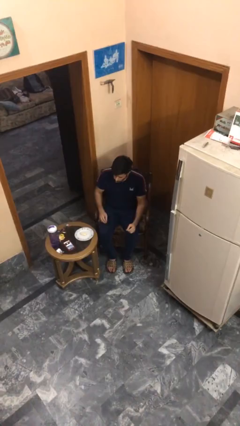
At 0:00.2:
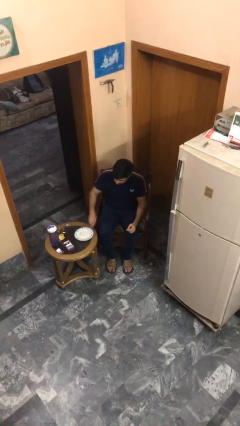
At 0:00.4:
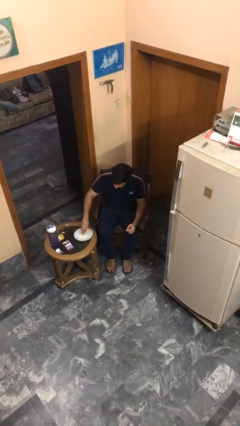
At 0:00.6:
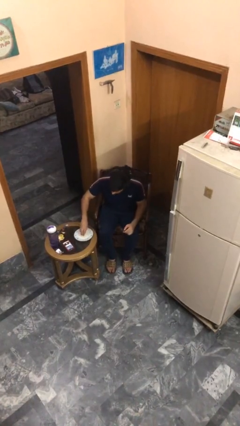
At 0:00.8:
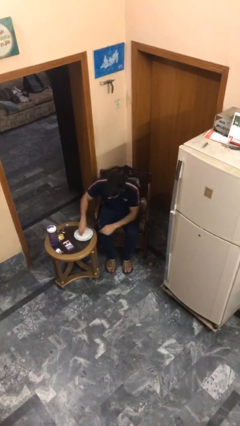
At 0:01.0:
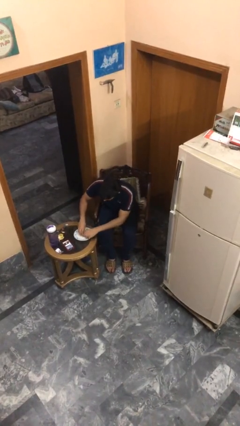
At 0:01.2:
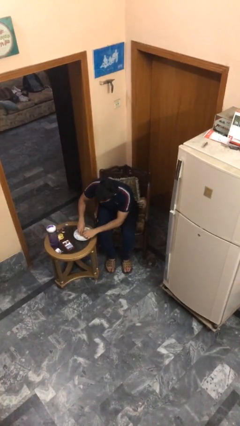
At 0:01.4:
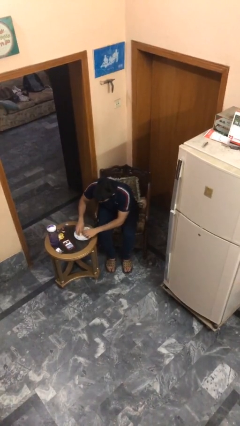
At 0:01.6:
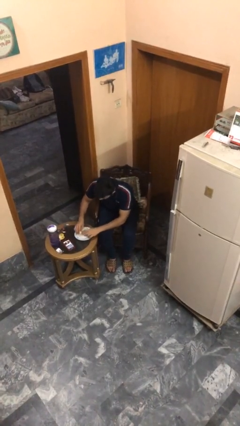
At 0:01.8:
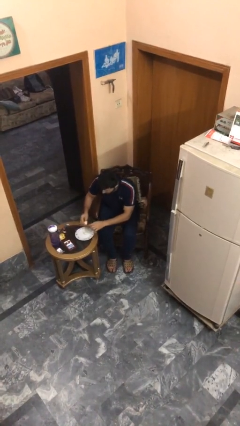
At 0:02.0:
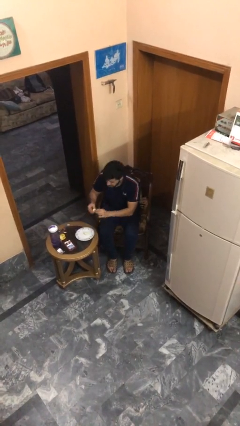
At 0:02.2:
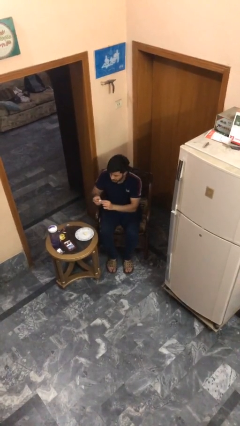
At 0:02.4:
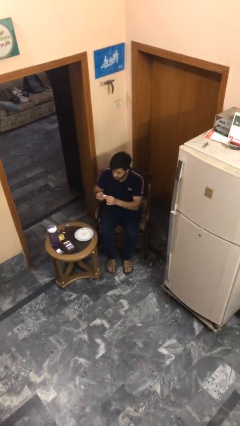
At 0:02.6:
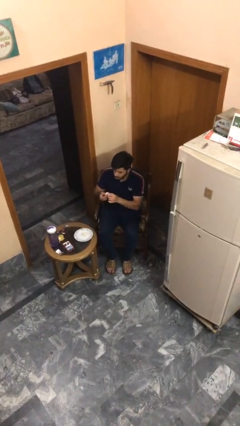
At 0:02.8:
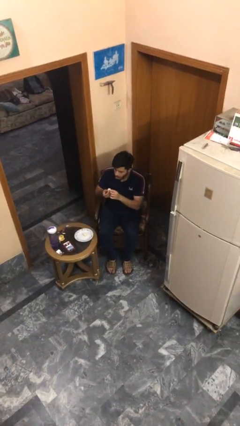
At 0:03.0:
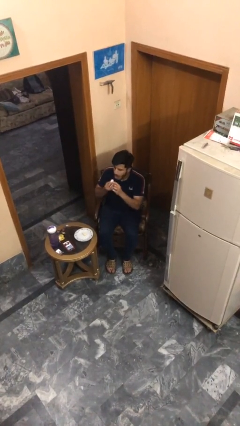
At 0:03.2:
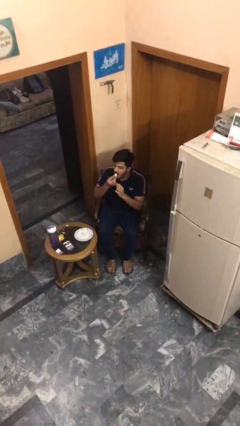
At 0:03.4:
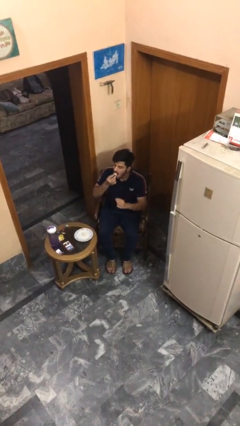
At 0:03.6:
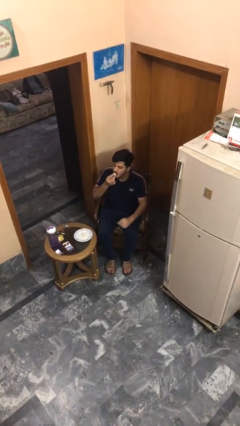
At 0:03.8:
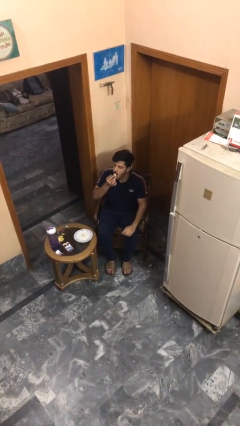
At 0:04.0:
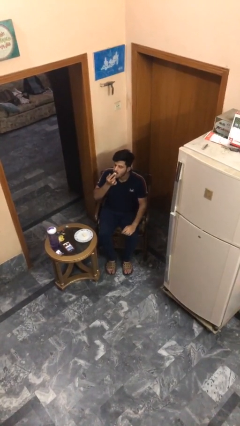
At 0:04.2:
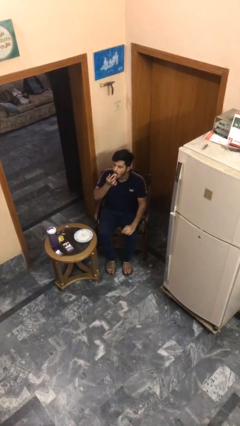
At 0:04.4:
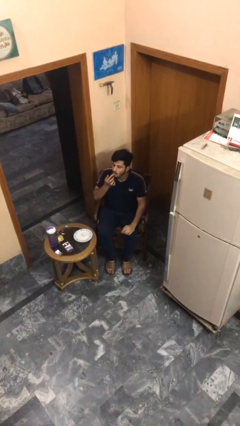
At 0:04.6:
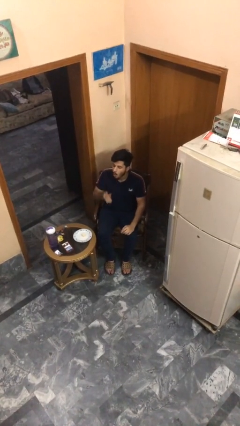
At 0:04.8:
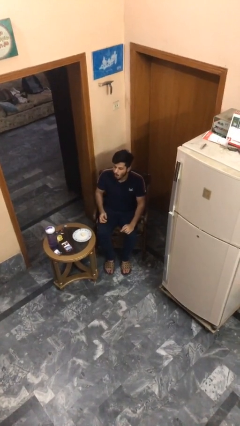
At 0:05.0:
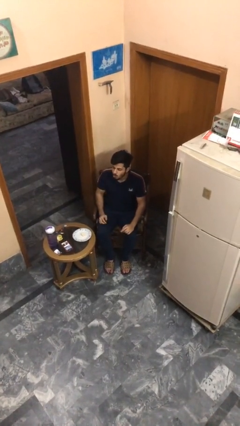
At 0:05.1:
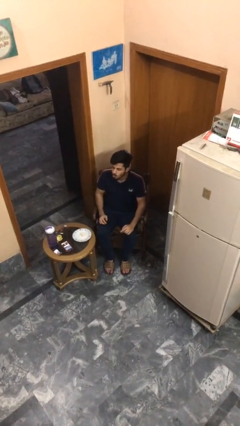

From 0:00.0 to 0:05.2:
person eats with hands

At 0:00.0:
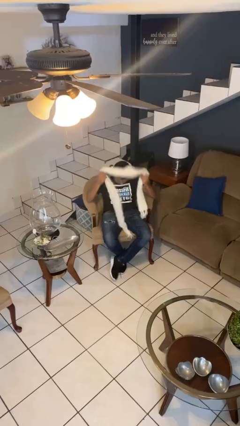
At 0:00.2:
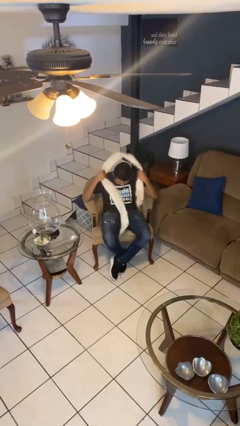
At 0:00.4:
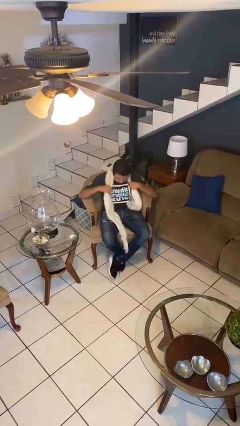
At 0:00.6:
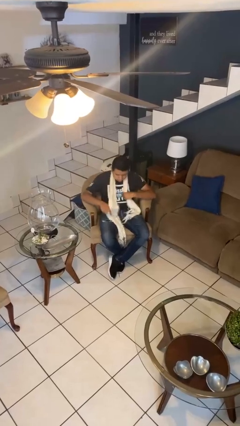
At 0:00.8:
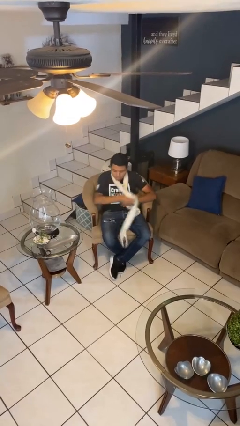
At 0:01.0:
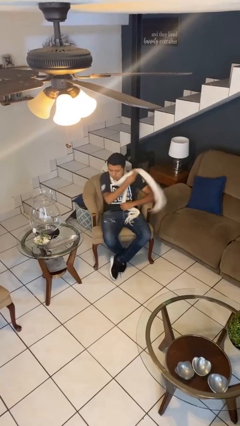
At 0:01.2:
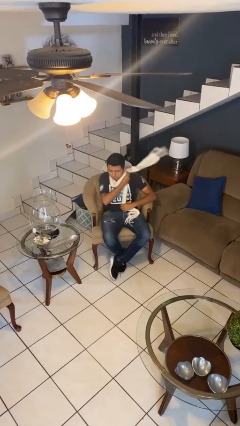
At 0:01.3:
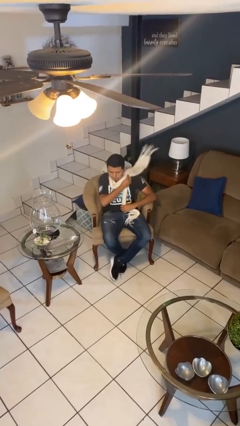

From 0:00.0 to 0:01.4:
person puts on scarf

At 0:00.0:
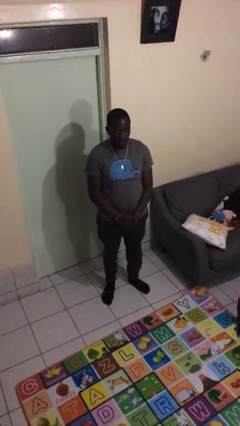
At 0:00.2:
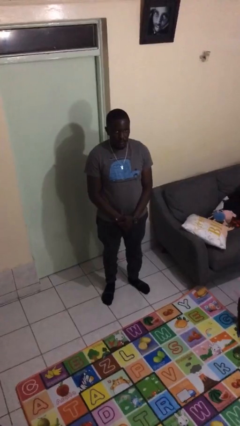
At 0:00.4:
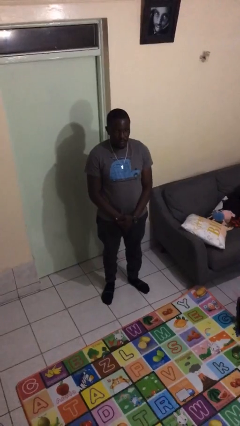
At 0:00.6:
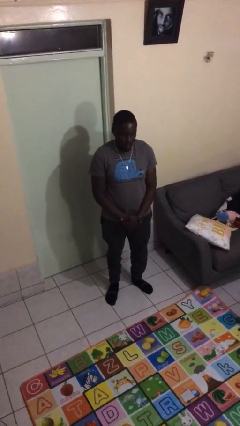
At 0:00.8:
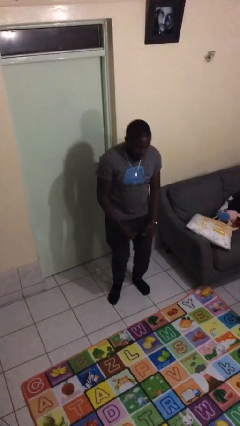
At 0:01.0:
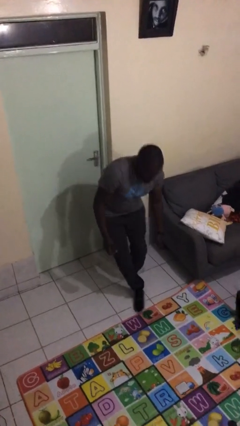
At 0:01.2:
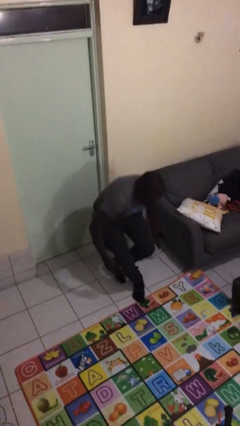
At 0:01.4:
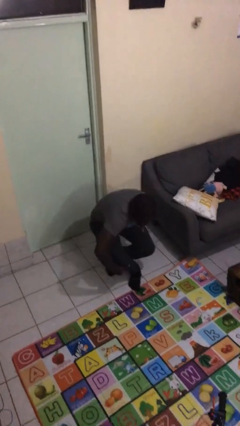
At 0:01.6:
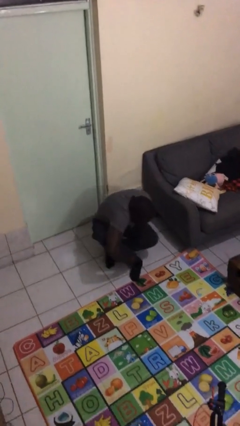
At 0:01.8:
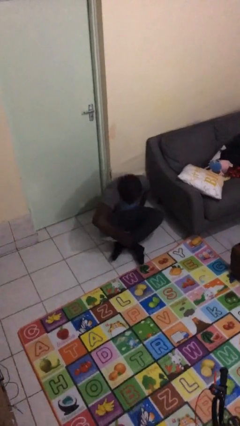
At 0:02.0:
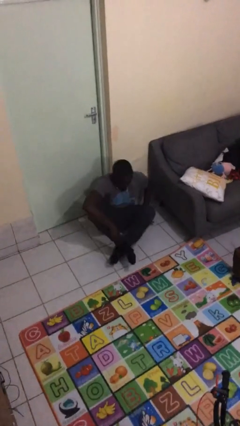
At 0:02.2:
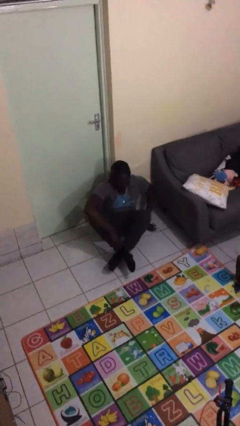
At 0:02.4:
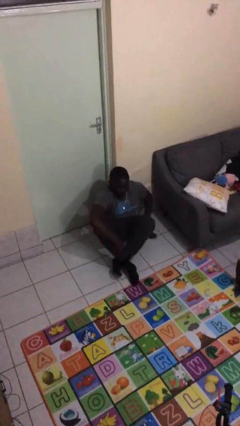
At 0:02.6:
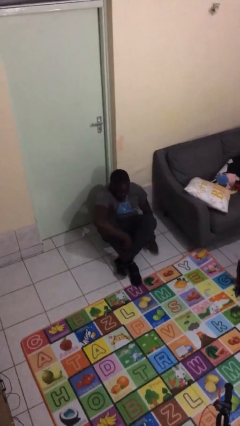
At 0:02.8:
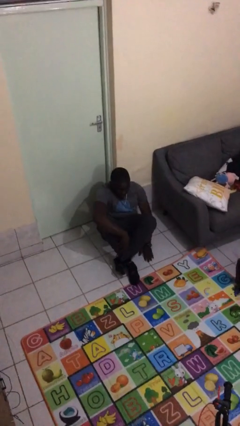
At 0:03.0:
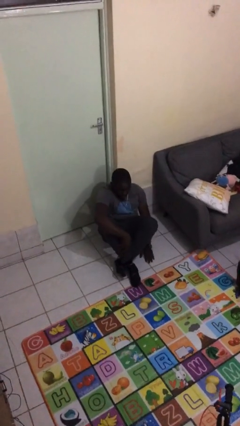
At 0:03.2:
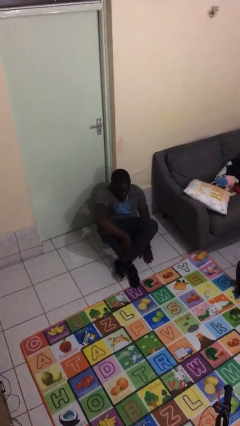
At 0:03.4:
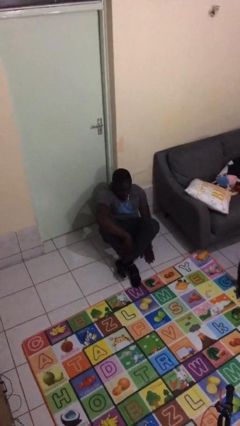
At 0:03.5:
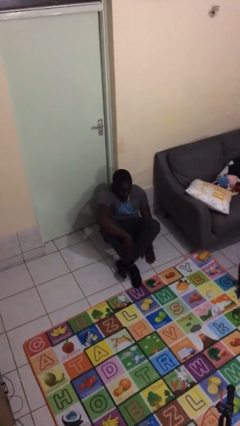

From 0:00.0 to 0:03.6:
person sits crisscross

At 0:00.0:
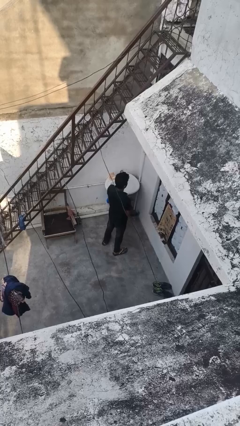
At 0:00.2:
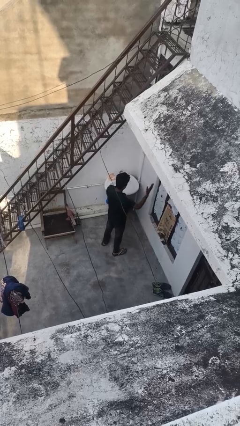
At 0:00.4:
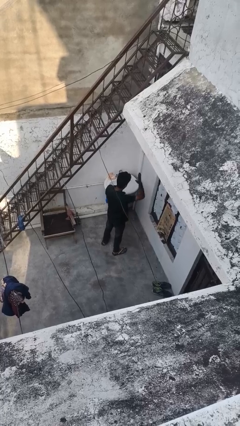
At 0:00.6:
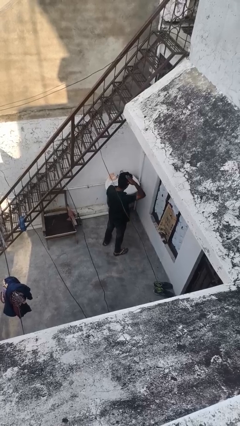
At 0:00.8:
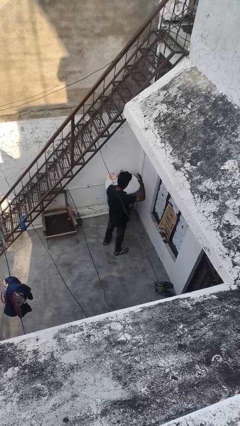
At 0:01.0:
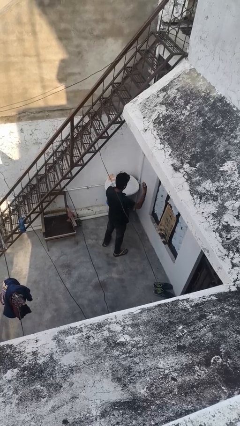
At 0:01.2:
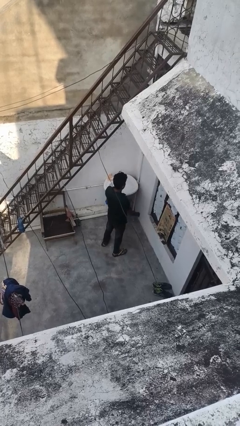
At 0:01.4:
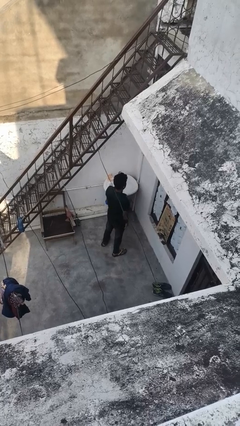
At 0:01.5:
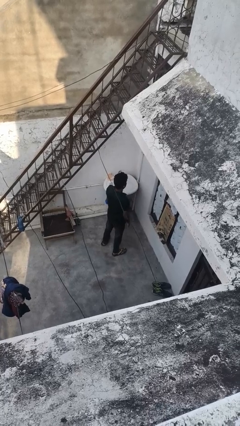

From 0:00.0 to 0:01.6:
person pats head

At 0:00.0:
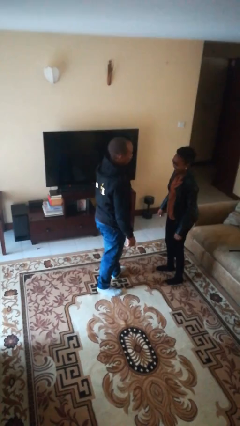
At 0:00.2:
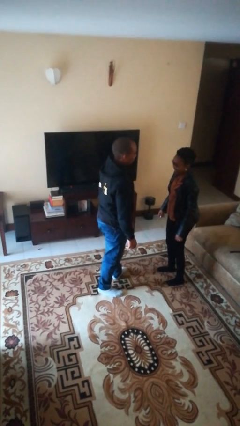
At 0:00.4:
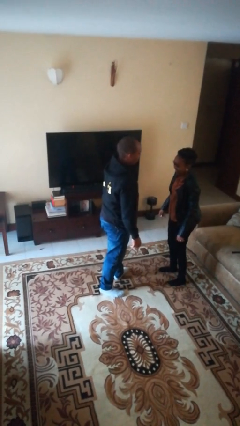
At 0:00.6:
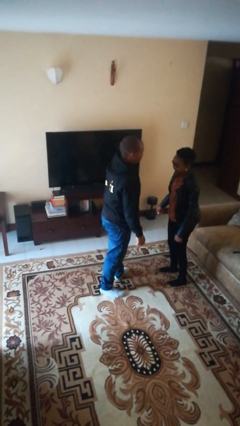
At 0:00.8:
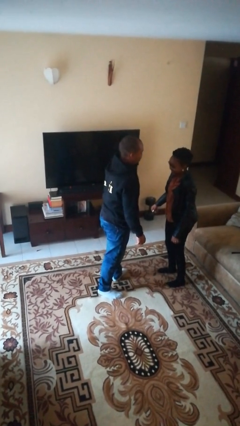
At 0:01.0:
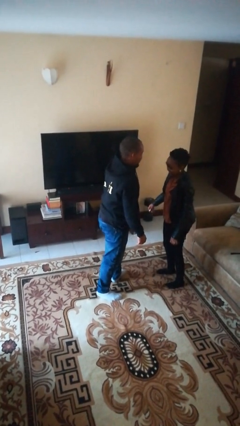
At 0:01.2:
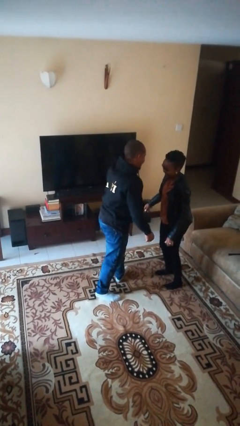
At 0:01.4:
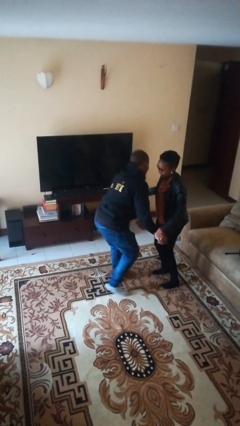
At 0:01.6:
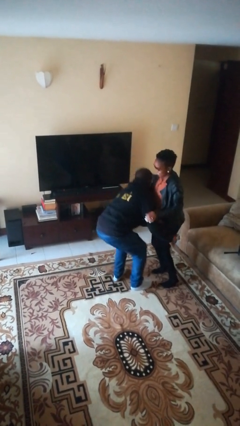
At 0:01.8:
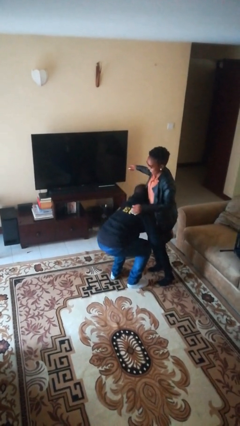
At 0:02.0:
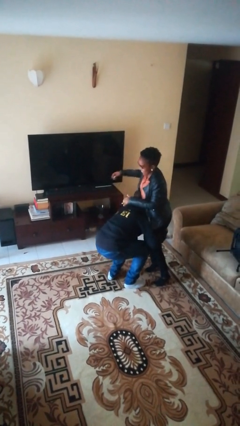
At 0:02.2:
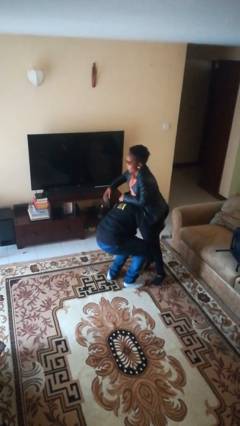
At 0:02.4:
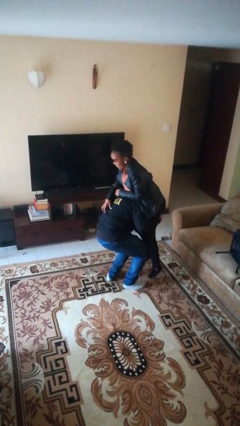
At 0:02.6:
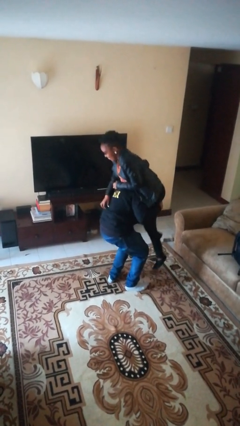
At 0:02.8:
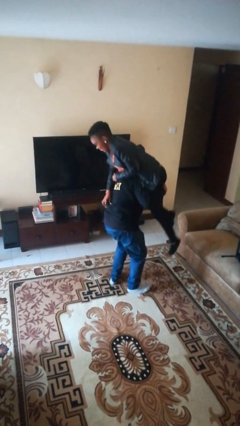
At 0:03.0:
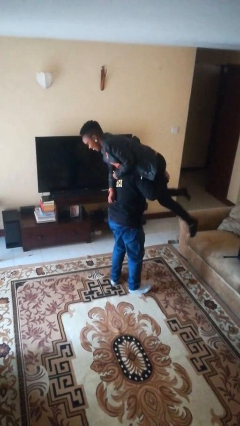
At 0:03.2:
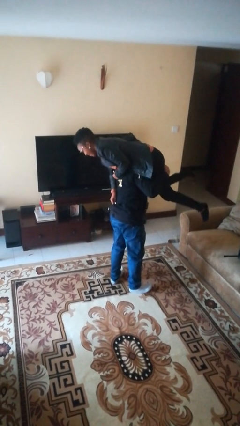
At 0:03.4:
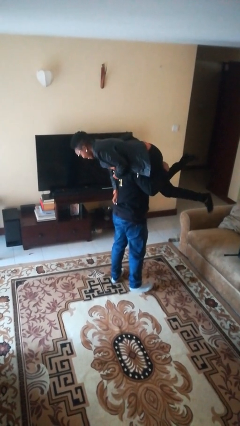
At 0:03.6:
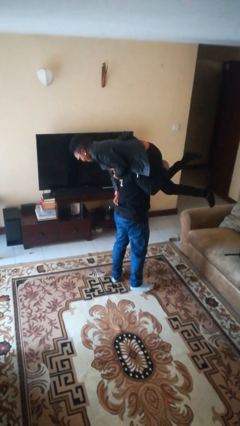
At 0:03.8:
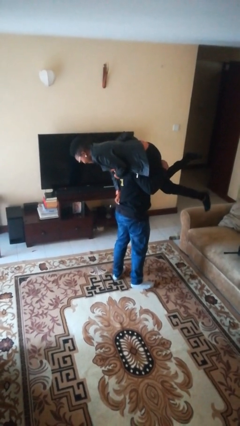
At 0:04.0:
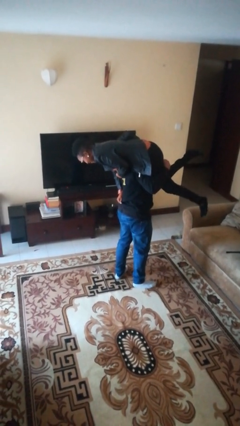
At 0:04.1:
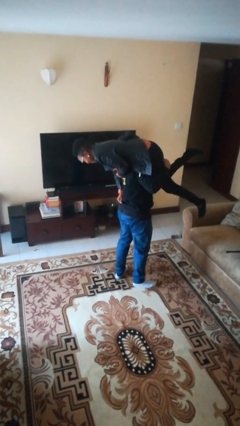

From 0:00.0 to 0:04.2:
person carries person over shoulder

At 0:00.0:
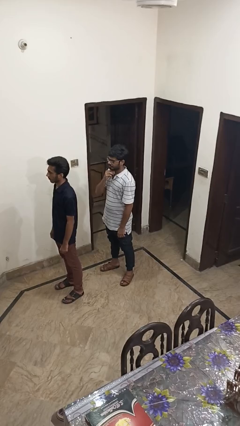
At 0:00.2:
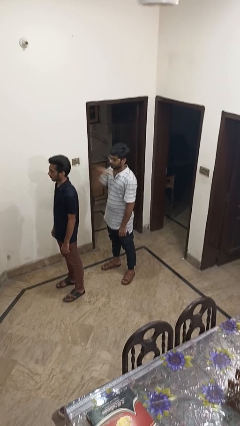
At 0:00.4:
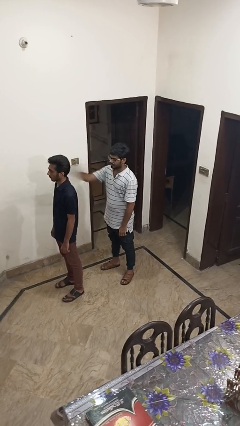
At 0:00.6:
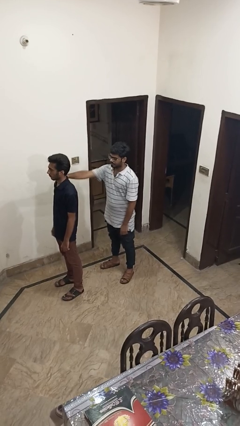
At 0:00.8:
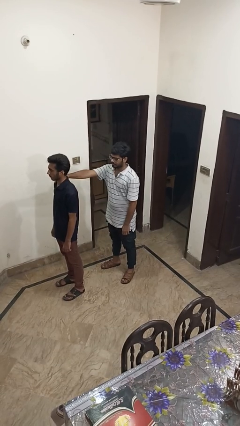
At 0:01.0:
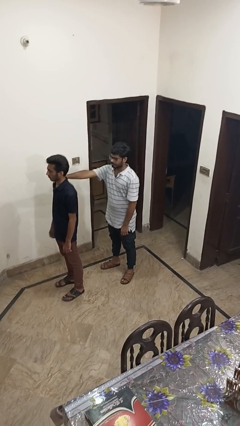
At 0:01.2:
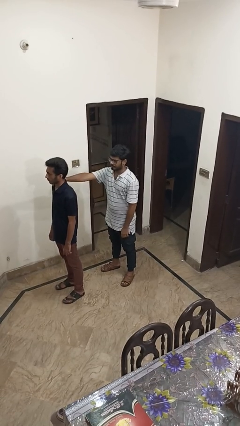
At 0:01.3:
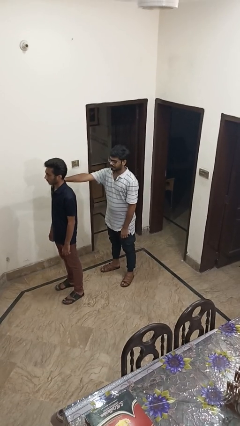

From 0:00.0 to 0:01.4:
person grabs person by shoulder
